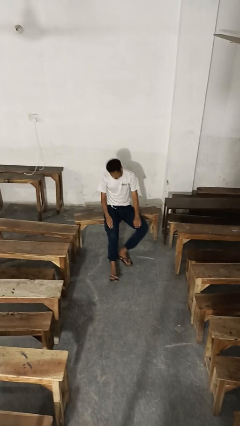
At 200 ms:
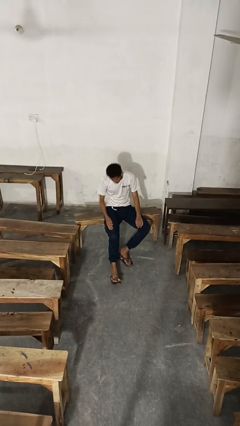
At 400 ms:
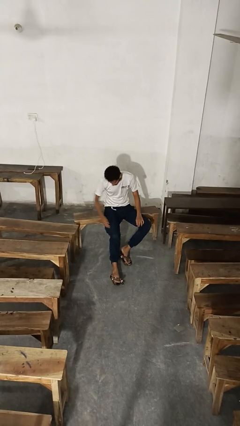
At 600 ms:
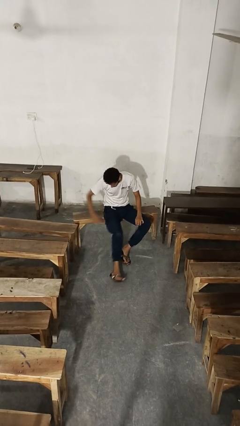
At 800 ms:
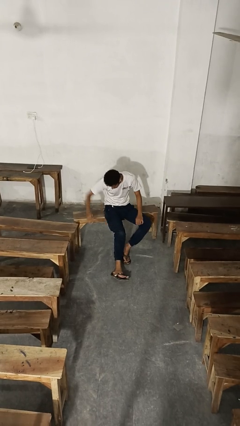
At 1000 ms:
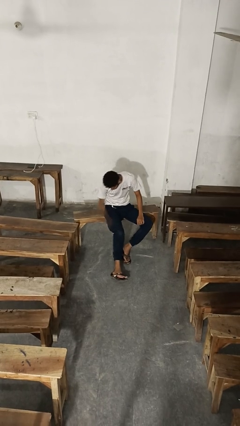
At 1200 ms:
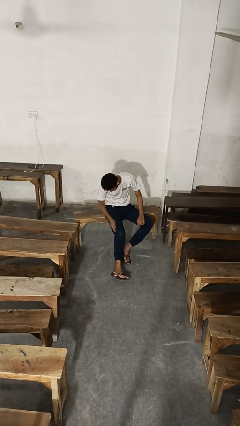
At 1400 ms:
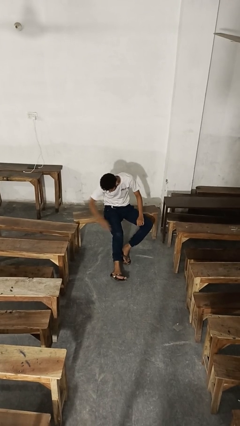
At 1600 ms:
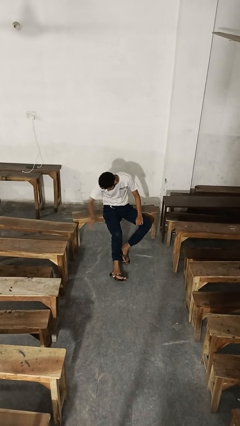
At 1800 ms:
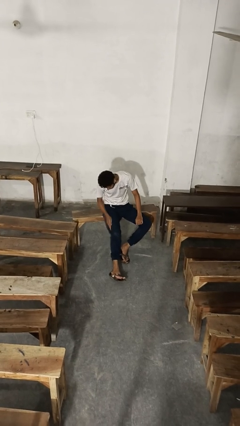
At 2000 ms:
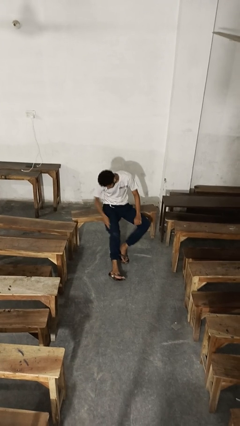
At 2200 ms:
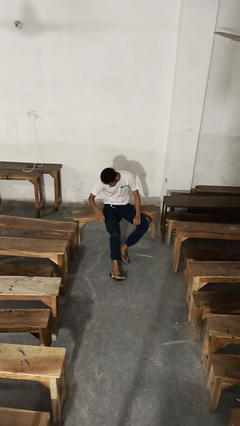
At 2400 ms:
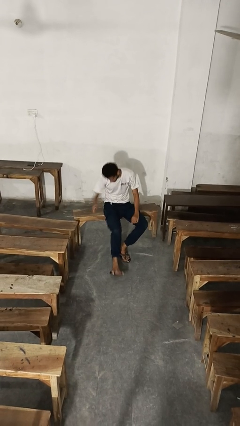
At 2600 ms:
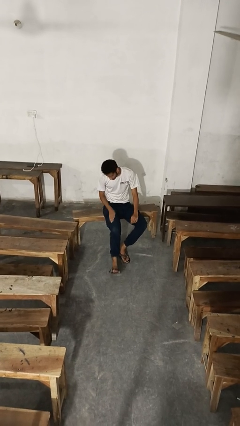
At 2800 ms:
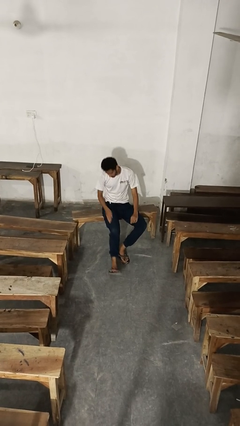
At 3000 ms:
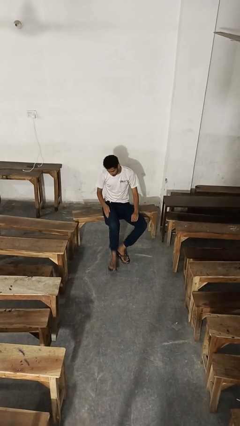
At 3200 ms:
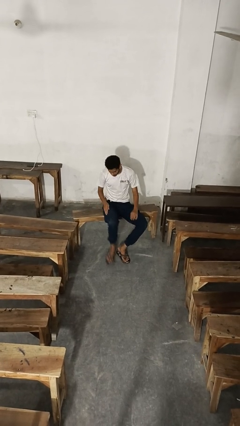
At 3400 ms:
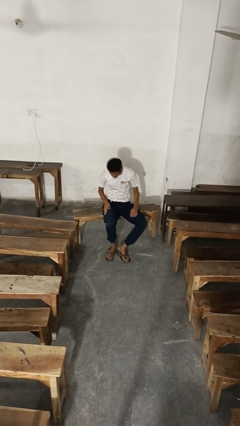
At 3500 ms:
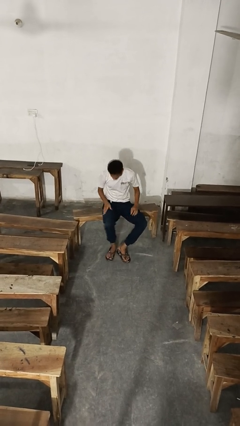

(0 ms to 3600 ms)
person slaps hands on thighs

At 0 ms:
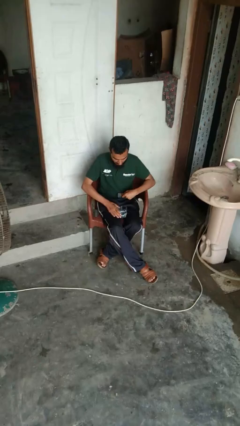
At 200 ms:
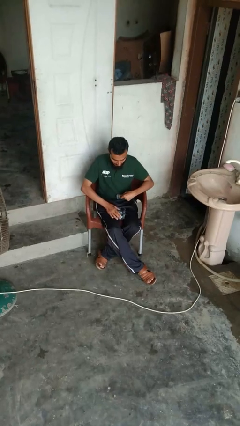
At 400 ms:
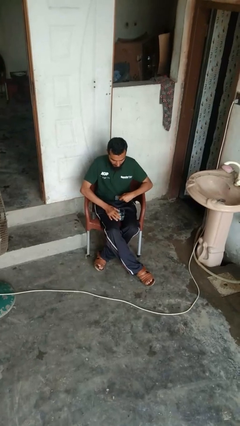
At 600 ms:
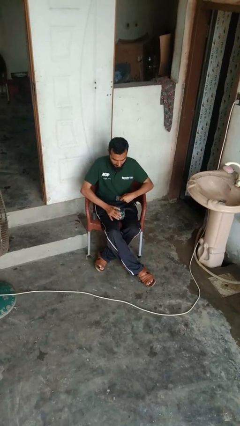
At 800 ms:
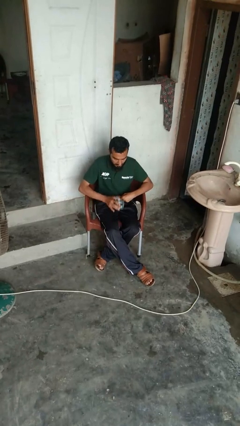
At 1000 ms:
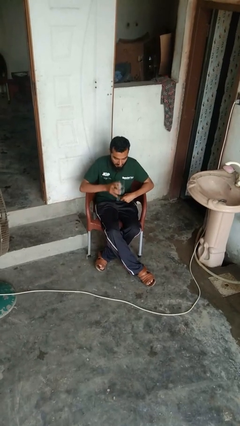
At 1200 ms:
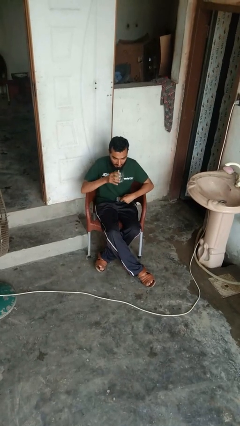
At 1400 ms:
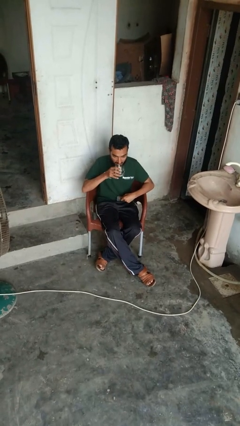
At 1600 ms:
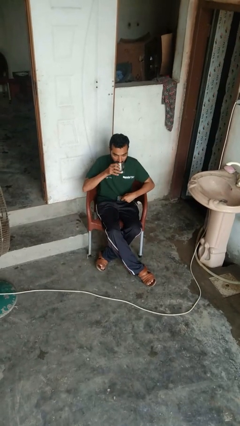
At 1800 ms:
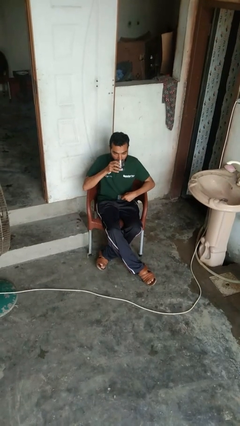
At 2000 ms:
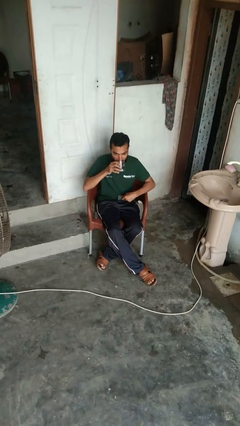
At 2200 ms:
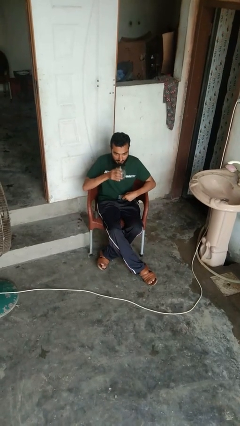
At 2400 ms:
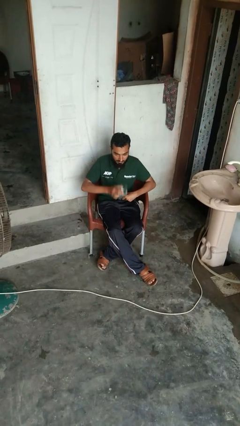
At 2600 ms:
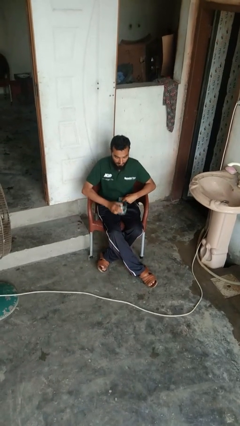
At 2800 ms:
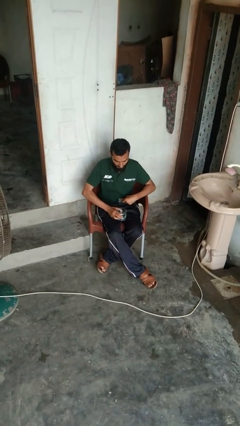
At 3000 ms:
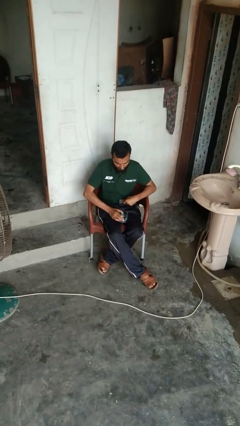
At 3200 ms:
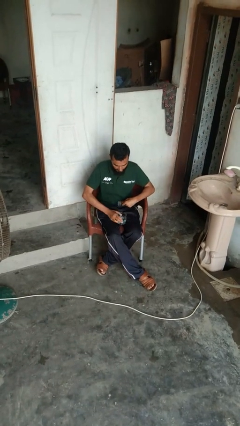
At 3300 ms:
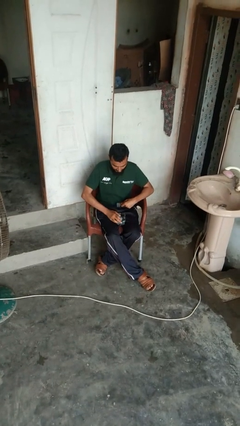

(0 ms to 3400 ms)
person drinks from cup

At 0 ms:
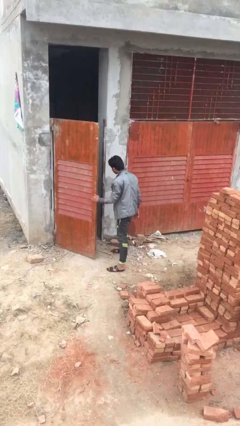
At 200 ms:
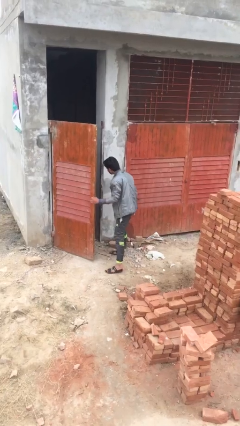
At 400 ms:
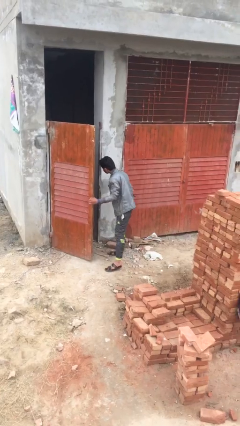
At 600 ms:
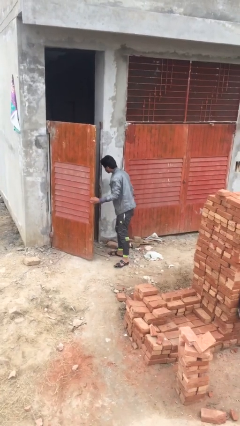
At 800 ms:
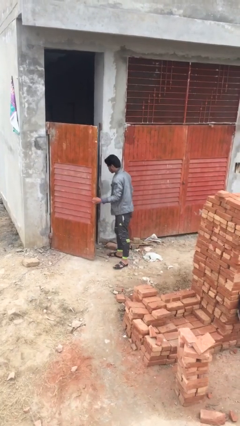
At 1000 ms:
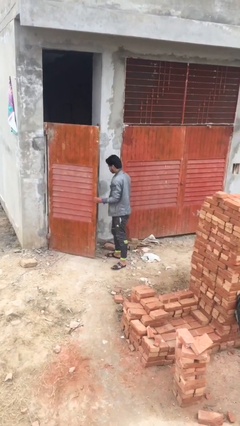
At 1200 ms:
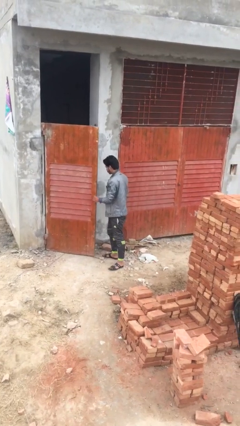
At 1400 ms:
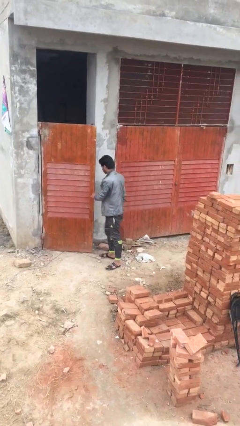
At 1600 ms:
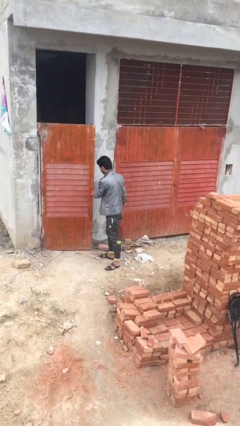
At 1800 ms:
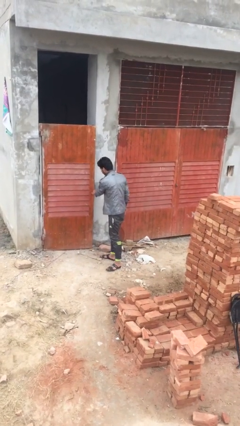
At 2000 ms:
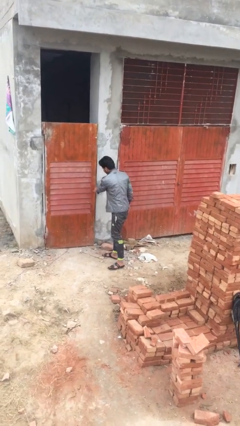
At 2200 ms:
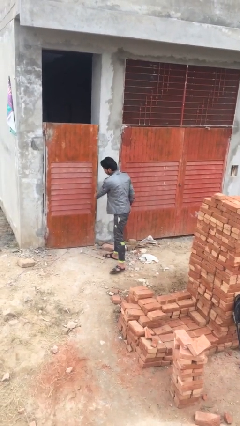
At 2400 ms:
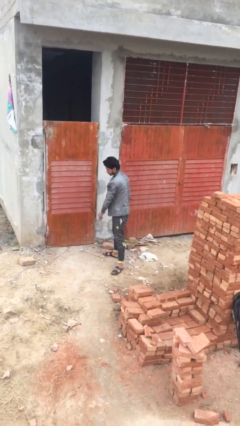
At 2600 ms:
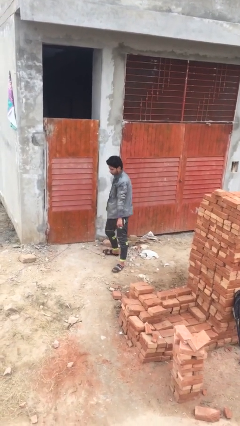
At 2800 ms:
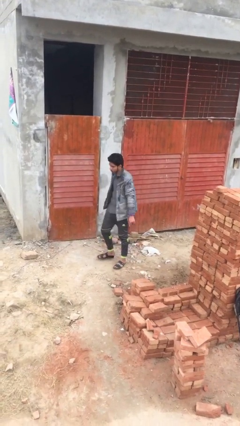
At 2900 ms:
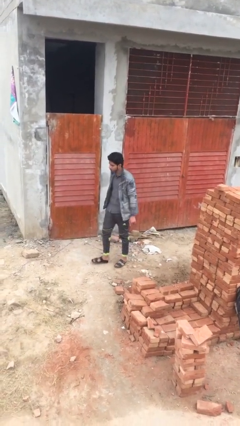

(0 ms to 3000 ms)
person closes facility door

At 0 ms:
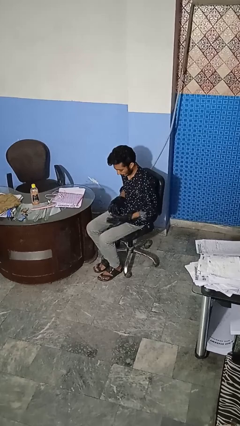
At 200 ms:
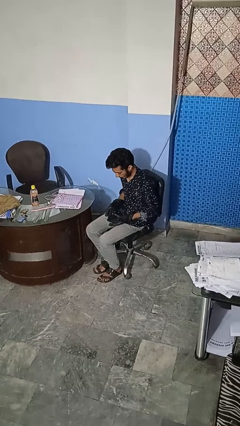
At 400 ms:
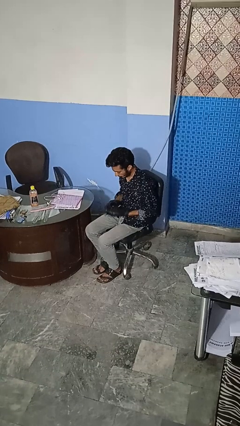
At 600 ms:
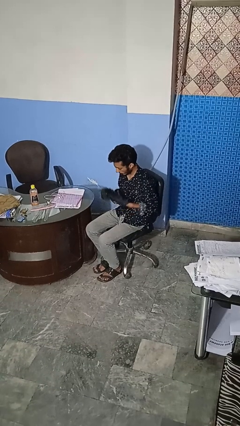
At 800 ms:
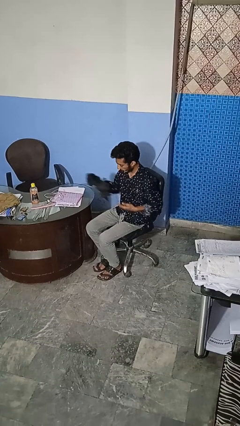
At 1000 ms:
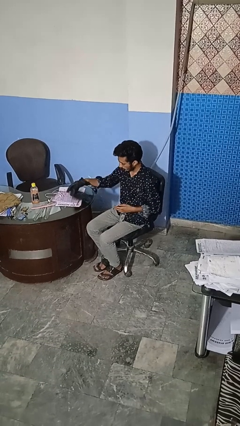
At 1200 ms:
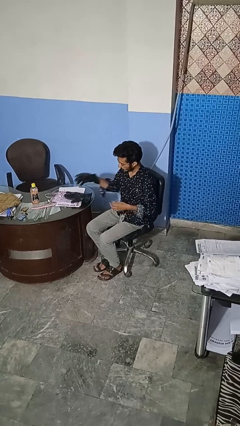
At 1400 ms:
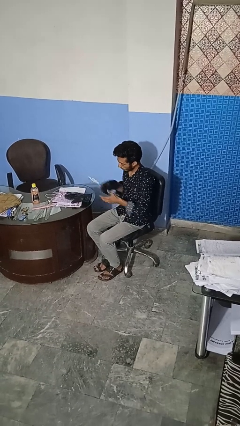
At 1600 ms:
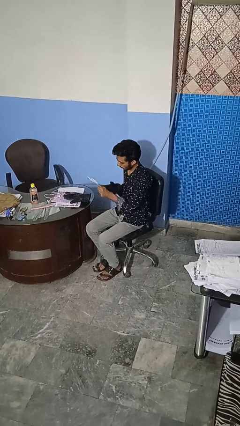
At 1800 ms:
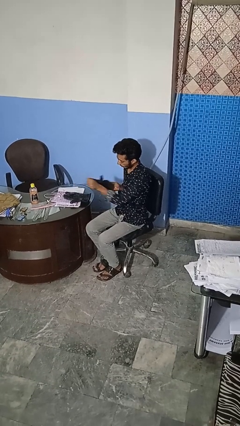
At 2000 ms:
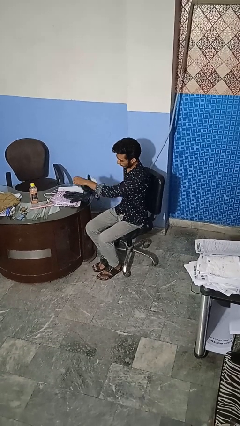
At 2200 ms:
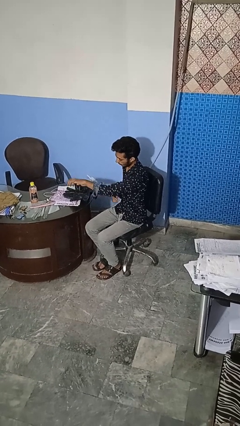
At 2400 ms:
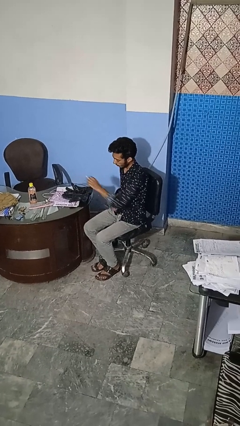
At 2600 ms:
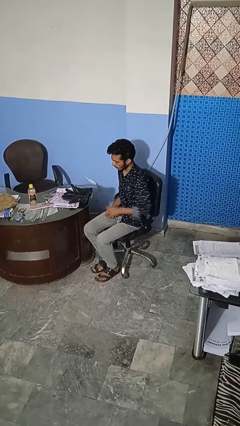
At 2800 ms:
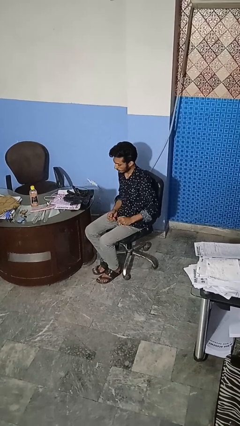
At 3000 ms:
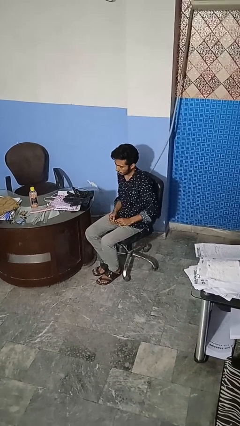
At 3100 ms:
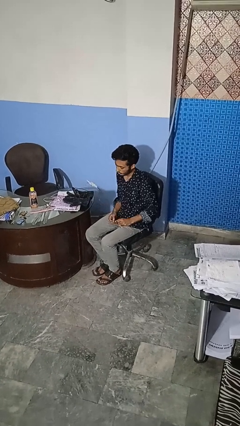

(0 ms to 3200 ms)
person takes off gloves

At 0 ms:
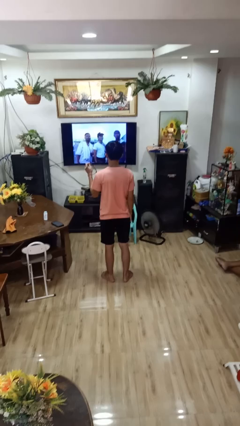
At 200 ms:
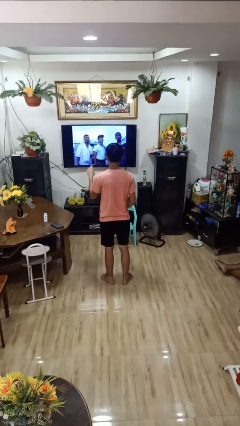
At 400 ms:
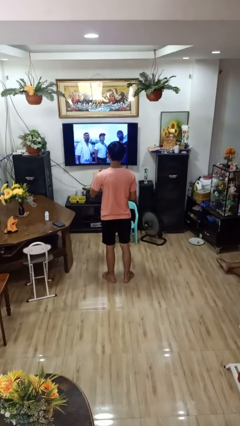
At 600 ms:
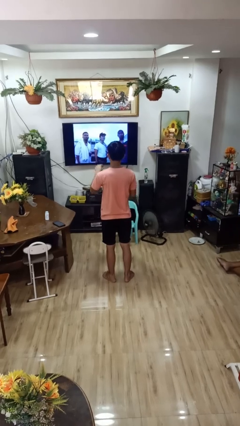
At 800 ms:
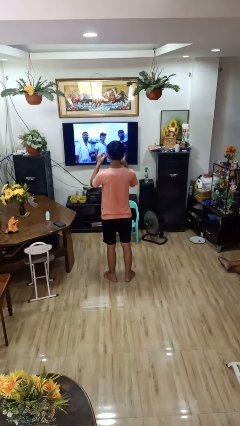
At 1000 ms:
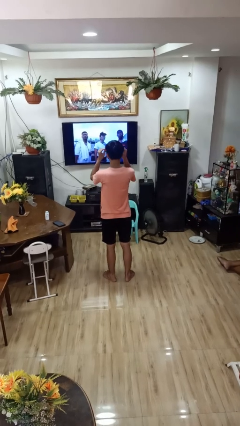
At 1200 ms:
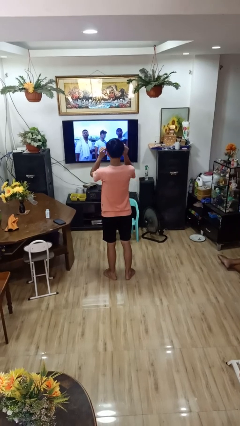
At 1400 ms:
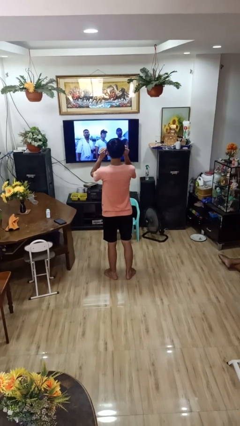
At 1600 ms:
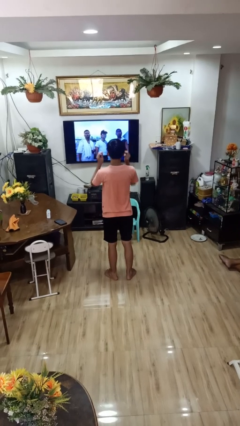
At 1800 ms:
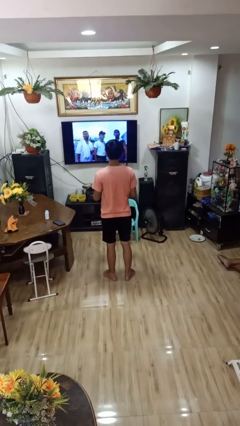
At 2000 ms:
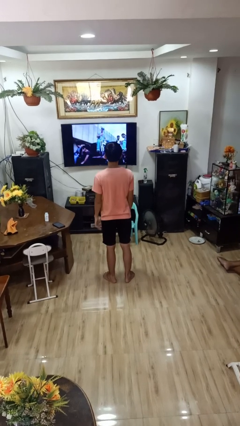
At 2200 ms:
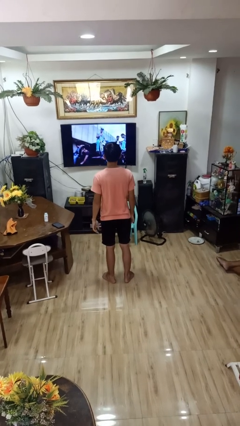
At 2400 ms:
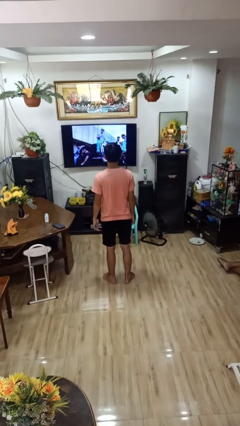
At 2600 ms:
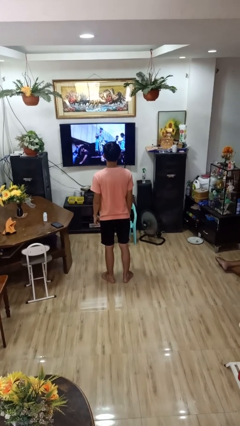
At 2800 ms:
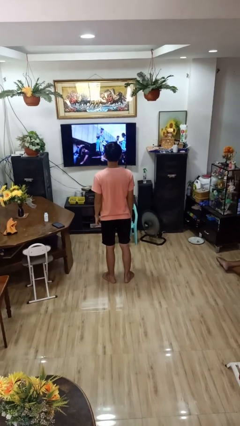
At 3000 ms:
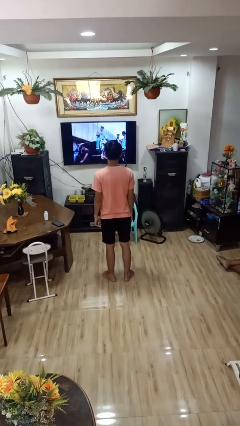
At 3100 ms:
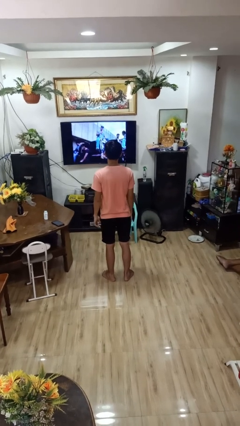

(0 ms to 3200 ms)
person puts on glasses

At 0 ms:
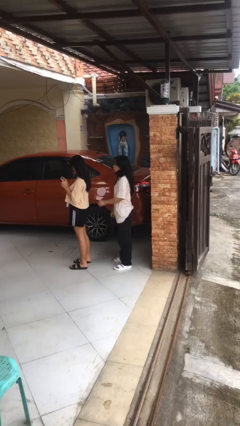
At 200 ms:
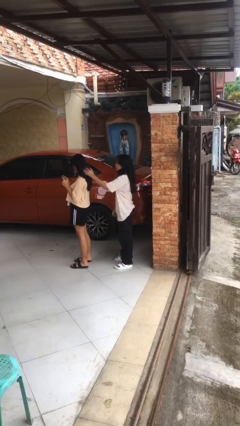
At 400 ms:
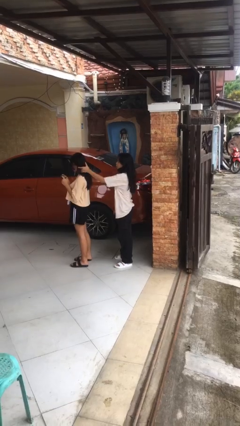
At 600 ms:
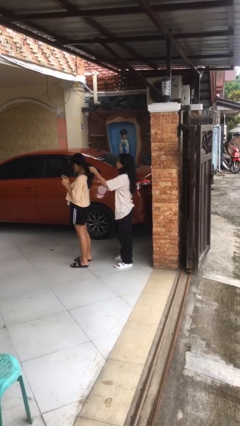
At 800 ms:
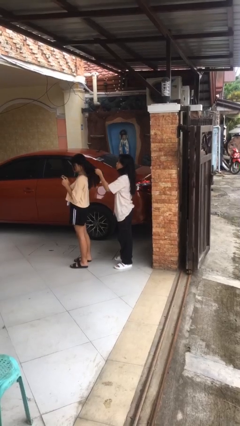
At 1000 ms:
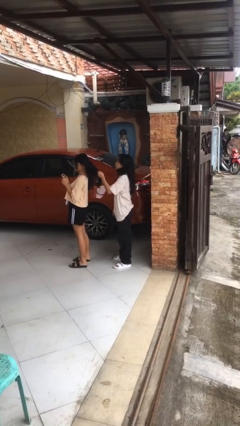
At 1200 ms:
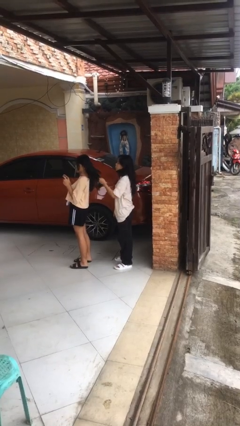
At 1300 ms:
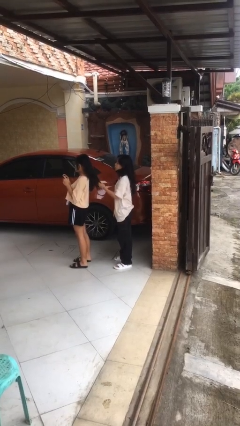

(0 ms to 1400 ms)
person grabs person by hair
